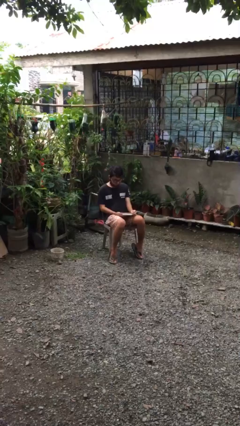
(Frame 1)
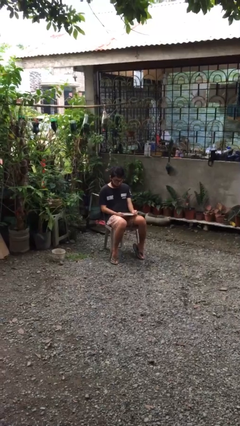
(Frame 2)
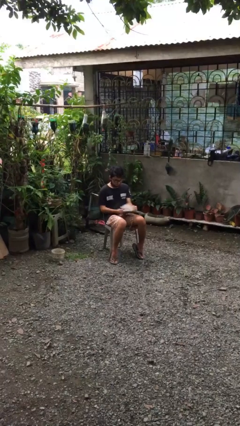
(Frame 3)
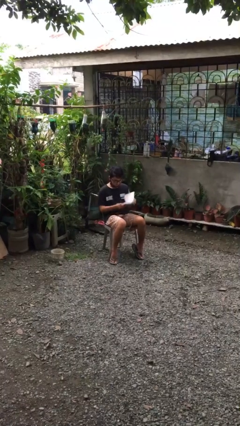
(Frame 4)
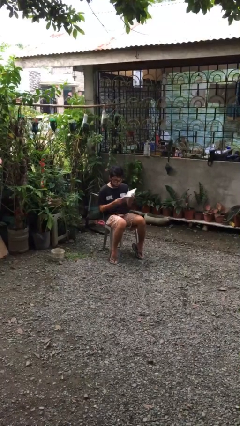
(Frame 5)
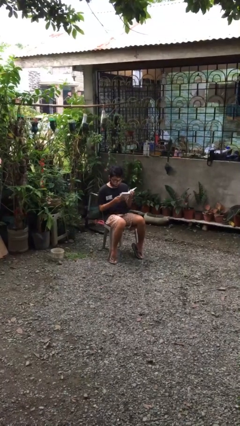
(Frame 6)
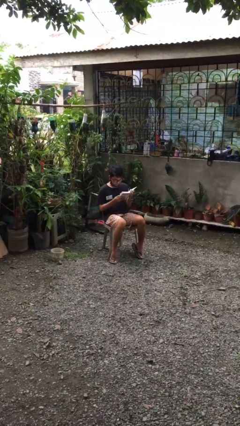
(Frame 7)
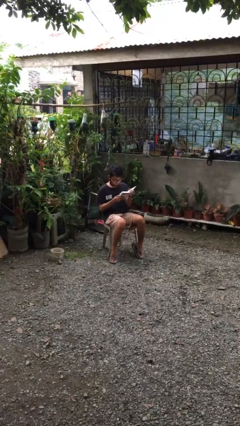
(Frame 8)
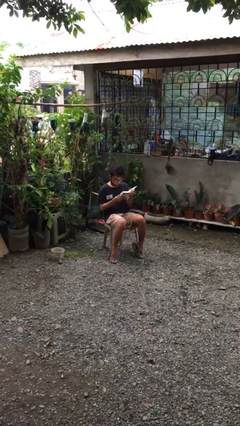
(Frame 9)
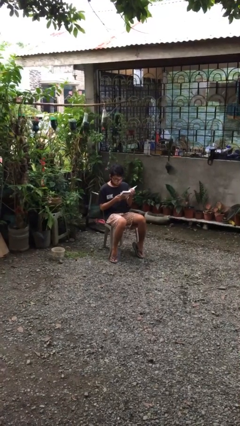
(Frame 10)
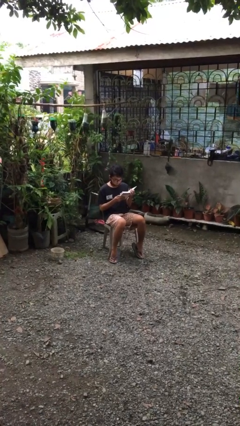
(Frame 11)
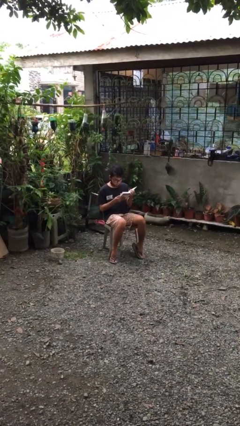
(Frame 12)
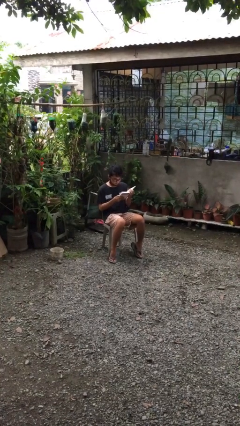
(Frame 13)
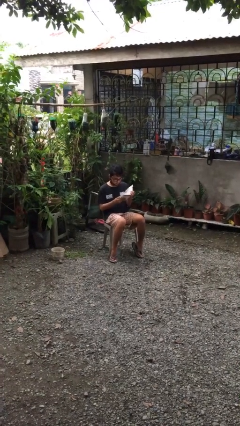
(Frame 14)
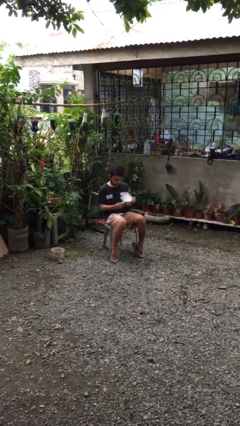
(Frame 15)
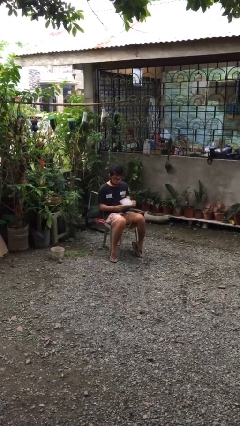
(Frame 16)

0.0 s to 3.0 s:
person reads document

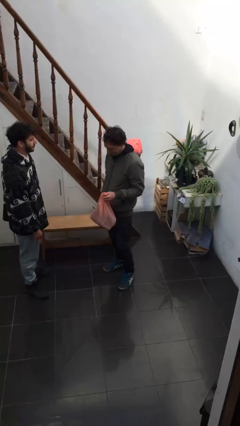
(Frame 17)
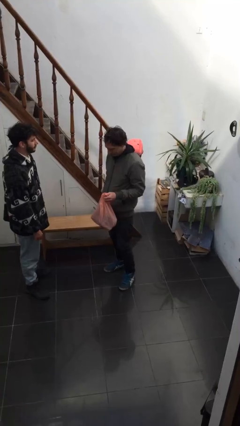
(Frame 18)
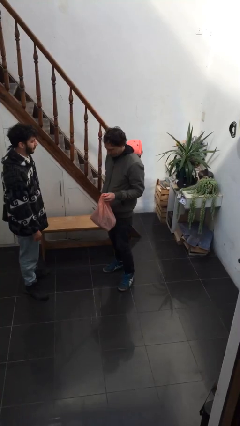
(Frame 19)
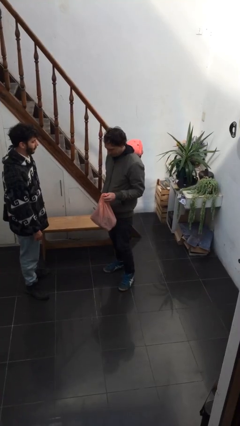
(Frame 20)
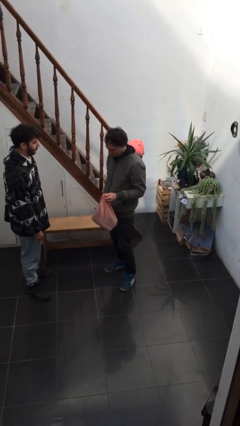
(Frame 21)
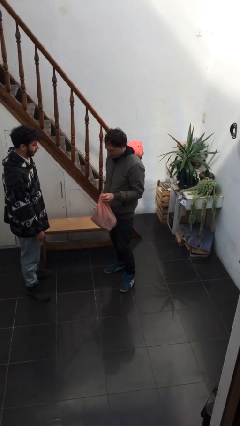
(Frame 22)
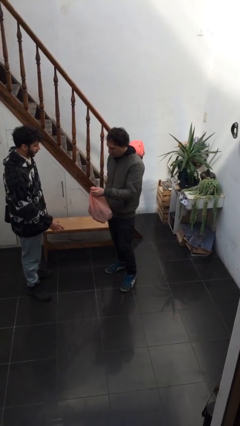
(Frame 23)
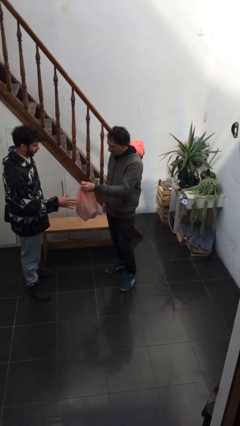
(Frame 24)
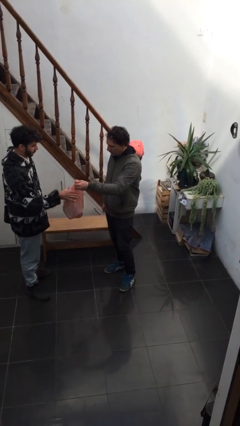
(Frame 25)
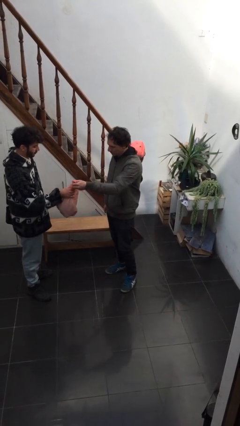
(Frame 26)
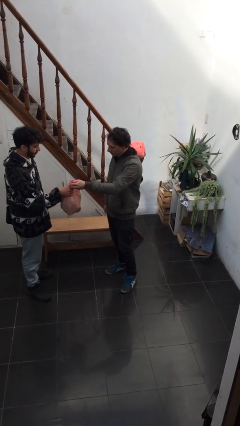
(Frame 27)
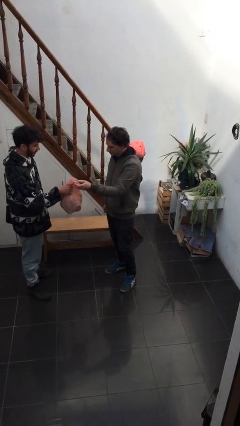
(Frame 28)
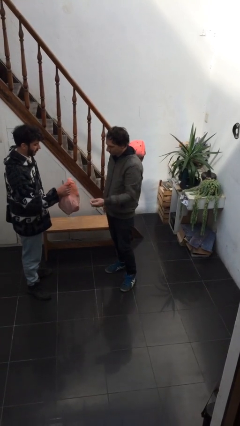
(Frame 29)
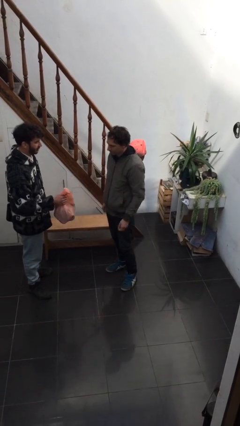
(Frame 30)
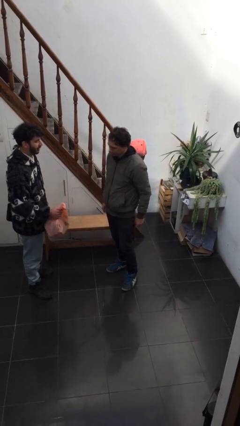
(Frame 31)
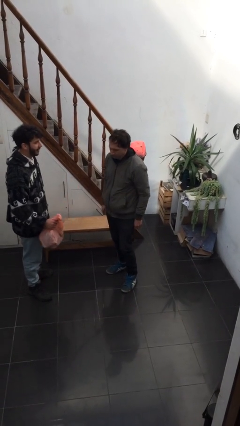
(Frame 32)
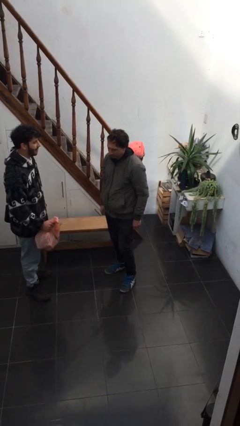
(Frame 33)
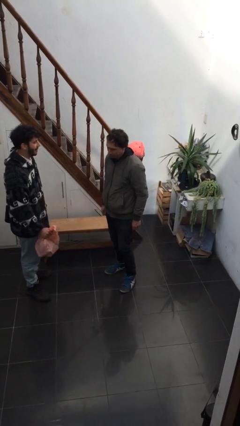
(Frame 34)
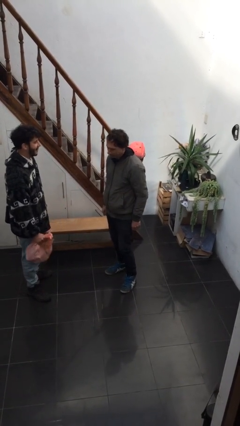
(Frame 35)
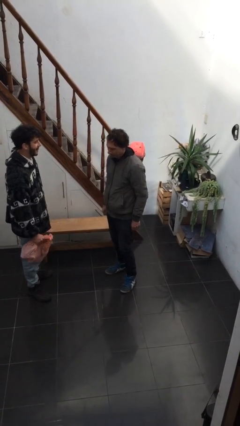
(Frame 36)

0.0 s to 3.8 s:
person transfers object to person

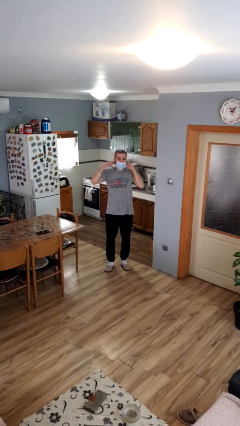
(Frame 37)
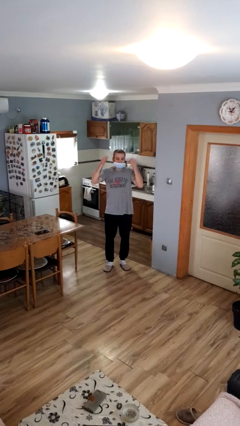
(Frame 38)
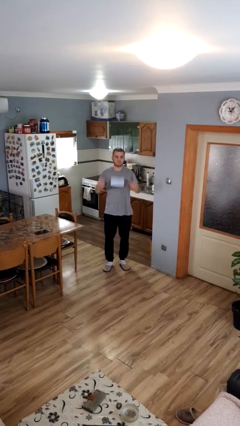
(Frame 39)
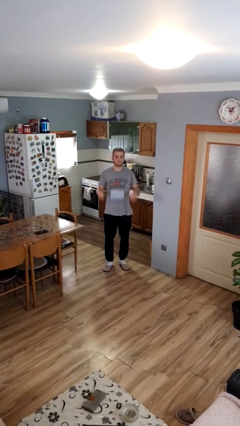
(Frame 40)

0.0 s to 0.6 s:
person takes off facemask

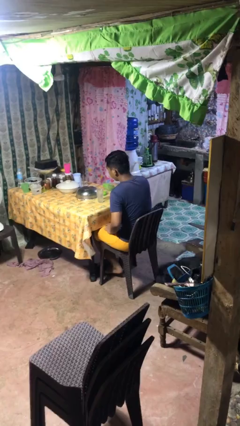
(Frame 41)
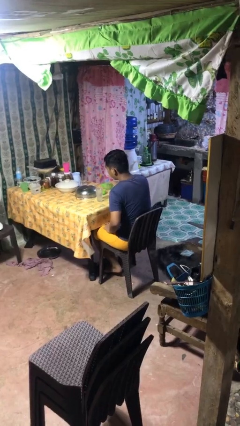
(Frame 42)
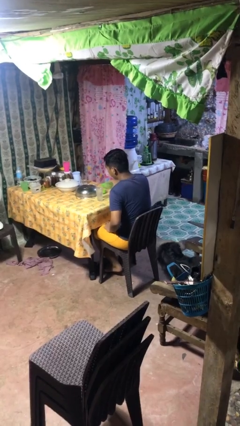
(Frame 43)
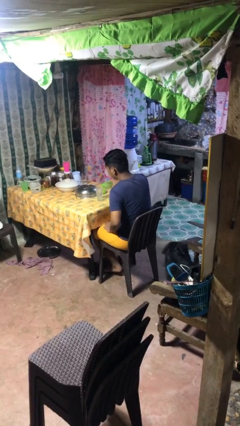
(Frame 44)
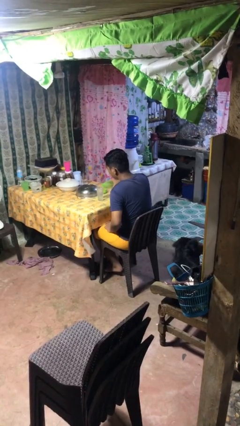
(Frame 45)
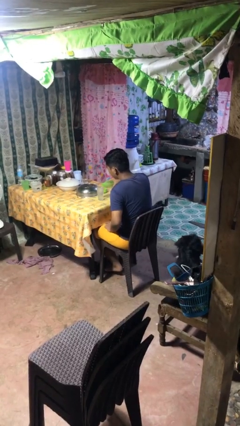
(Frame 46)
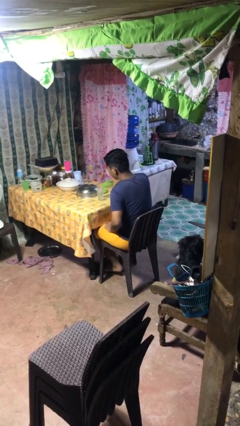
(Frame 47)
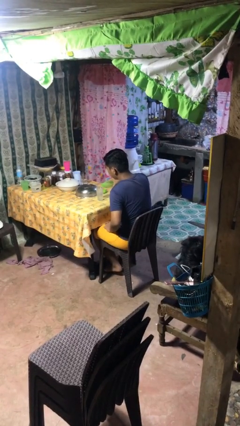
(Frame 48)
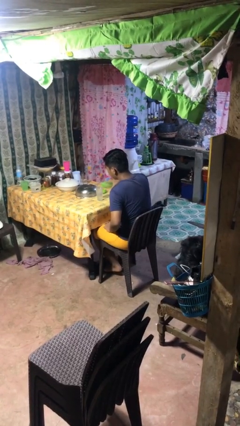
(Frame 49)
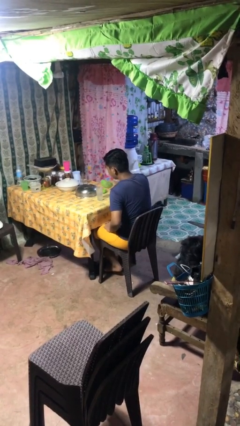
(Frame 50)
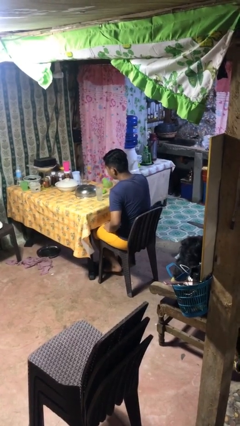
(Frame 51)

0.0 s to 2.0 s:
person pours liquid into cup

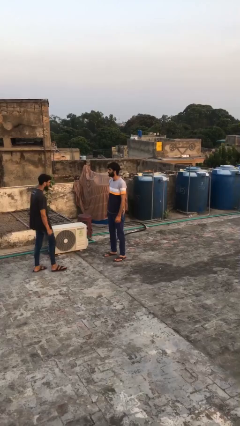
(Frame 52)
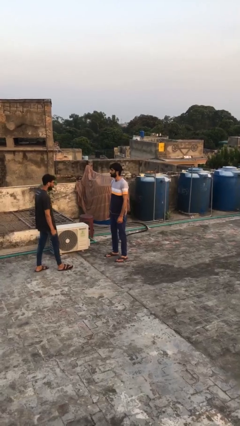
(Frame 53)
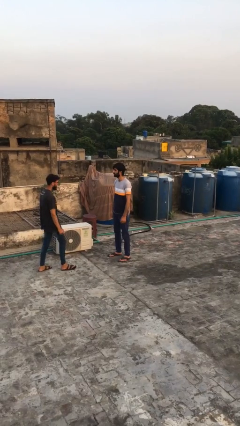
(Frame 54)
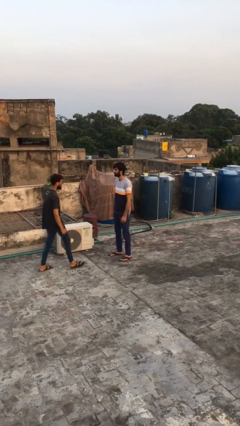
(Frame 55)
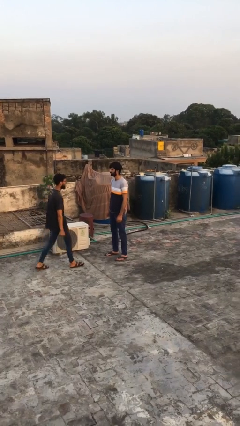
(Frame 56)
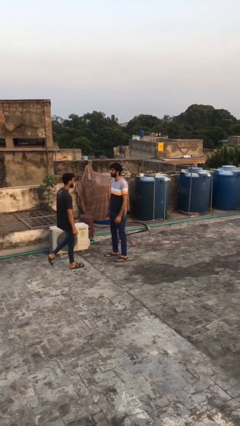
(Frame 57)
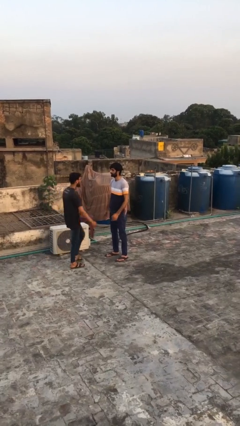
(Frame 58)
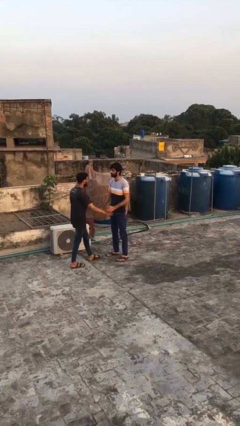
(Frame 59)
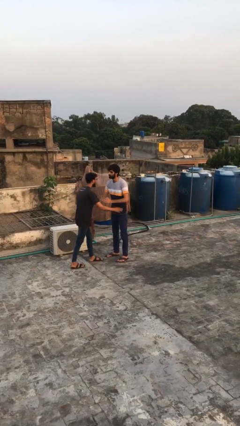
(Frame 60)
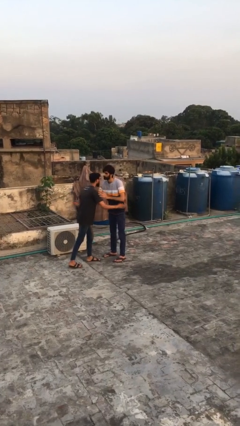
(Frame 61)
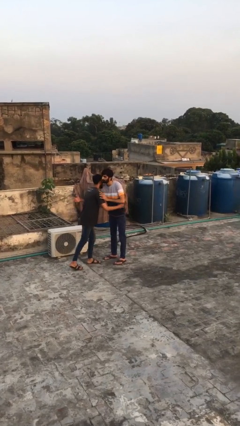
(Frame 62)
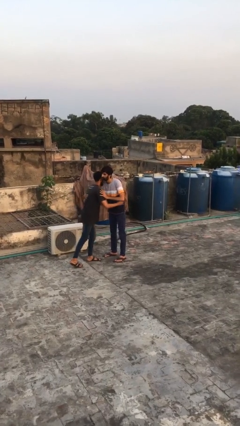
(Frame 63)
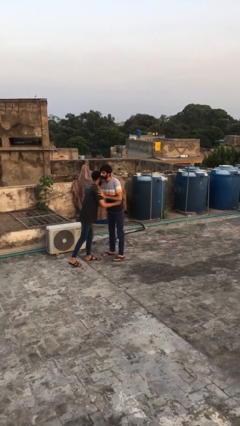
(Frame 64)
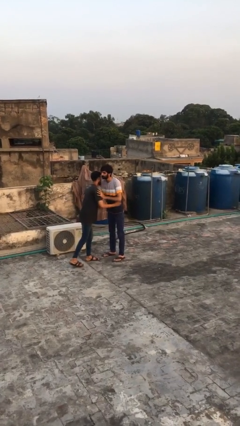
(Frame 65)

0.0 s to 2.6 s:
person embraces person

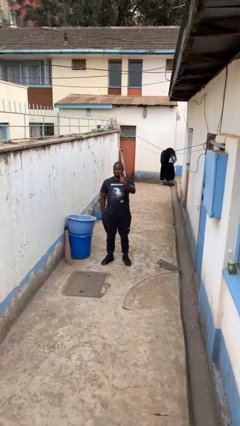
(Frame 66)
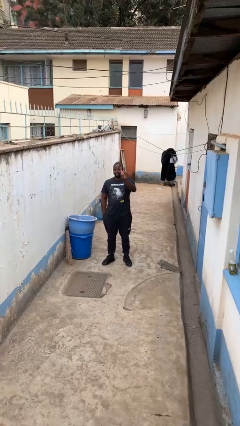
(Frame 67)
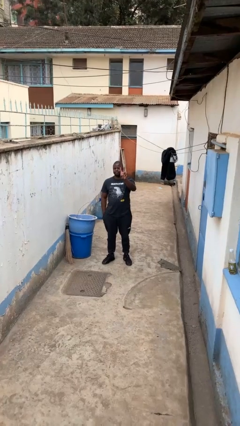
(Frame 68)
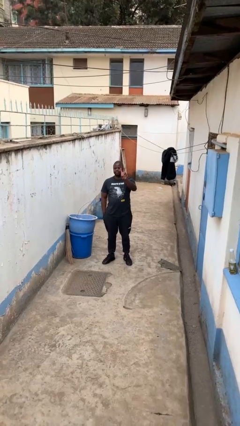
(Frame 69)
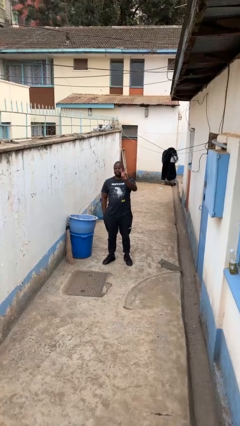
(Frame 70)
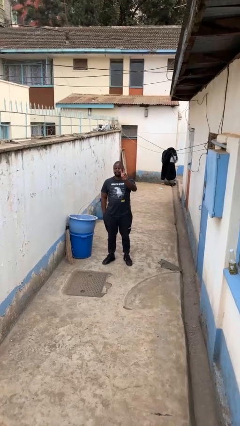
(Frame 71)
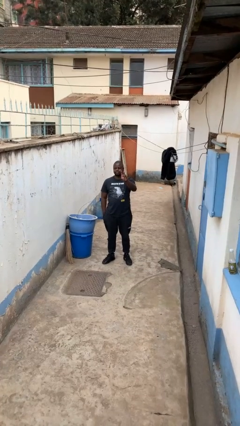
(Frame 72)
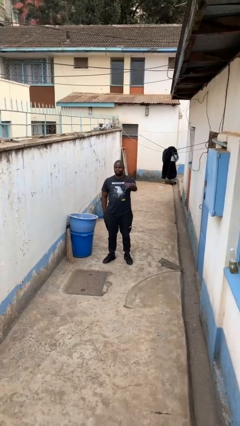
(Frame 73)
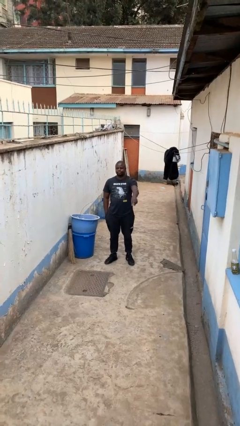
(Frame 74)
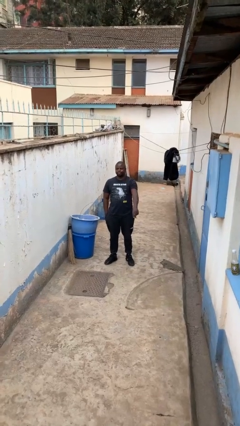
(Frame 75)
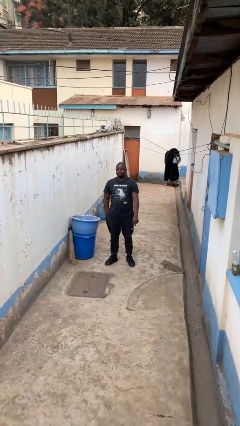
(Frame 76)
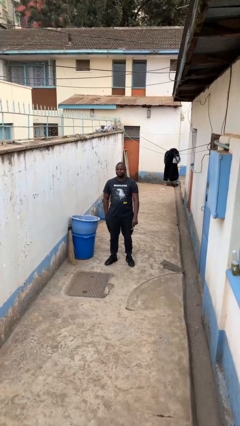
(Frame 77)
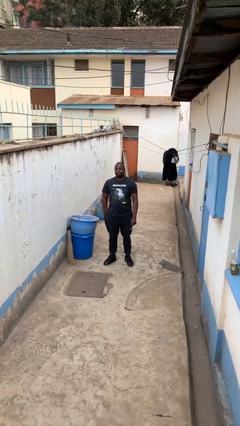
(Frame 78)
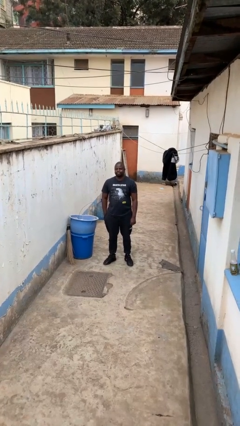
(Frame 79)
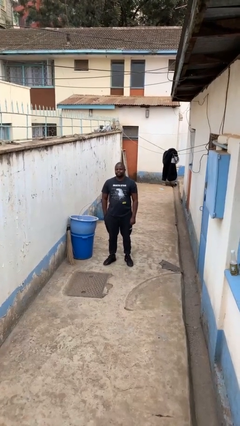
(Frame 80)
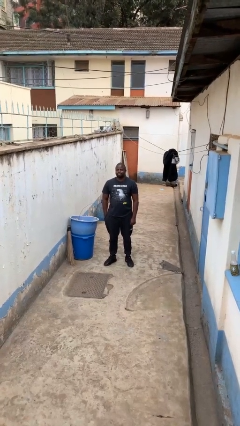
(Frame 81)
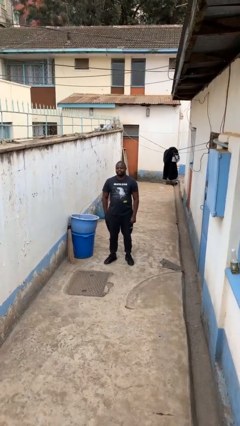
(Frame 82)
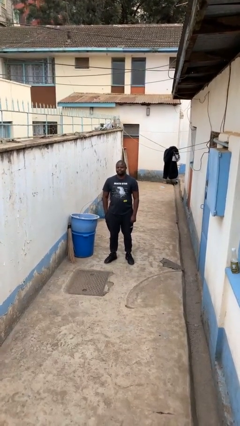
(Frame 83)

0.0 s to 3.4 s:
person gestures peace

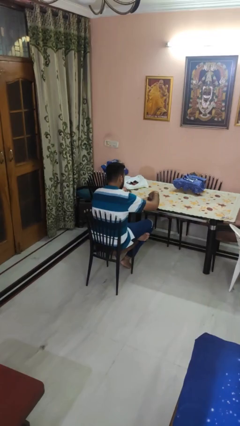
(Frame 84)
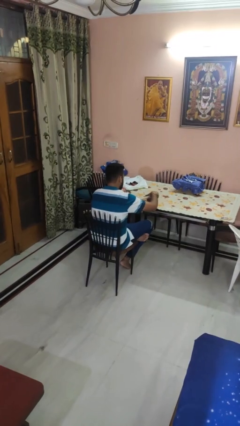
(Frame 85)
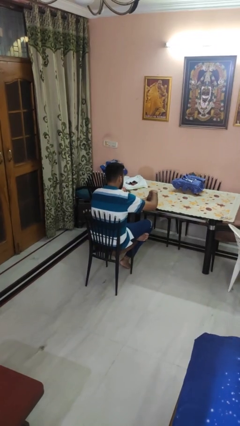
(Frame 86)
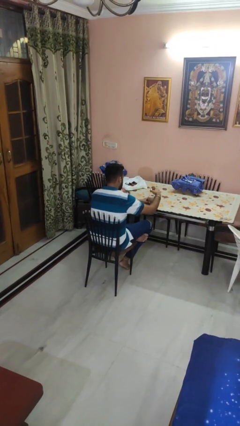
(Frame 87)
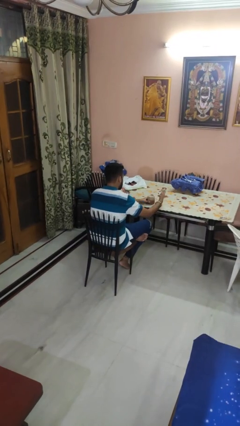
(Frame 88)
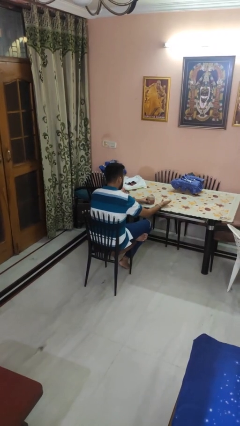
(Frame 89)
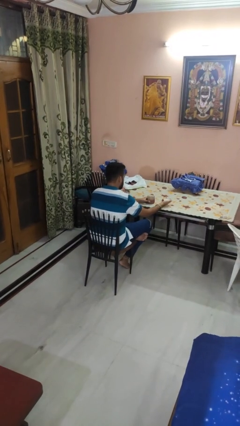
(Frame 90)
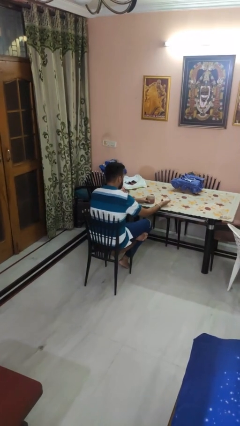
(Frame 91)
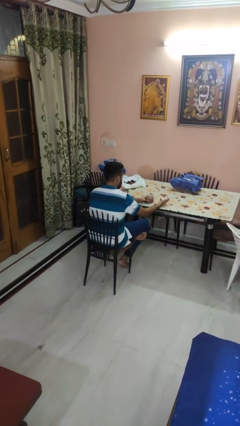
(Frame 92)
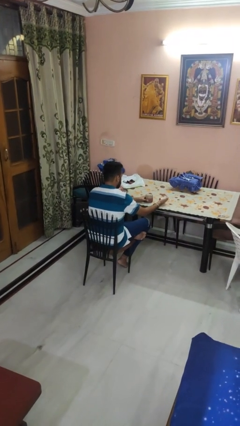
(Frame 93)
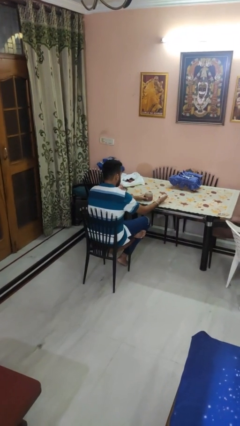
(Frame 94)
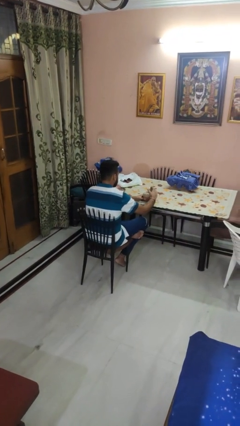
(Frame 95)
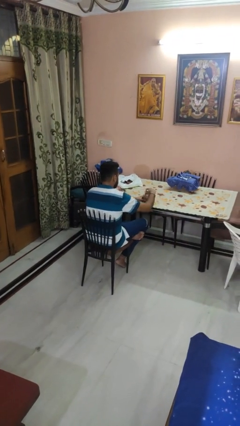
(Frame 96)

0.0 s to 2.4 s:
person opens jar
